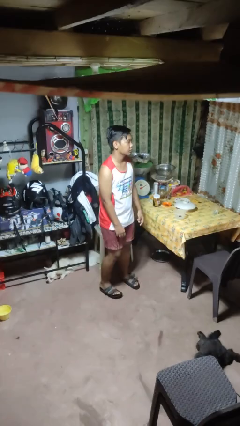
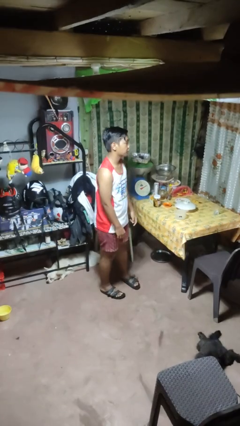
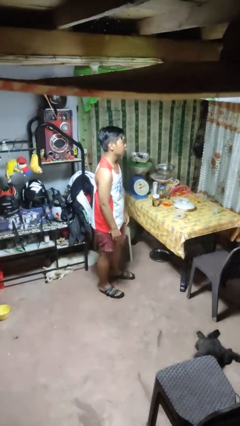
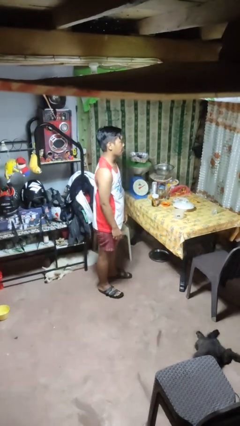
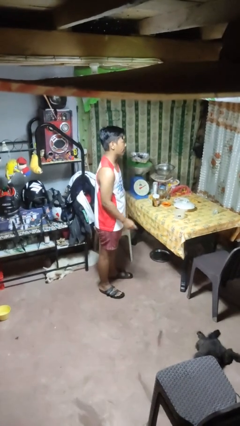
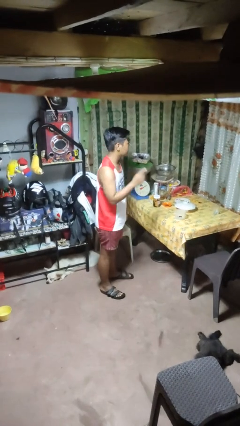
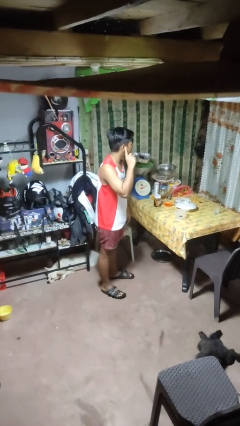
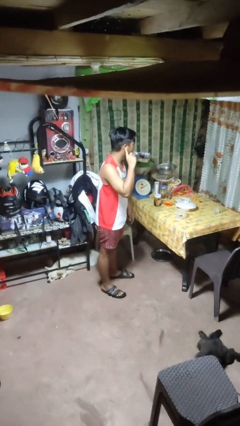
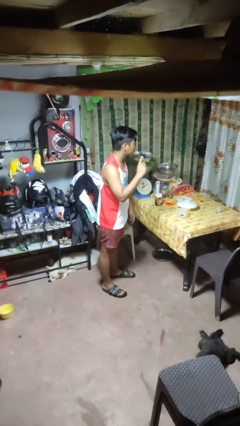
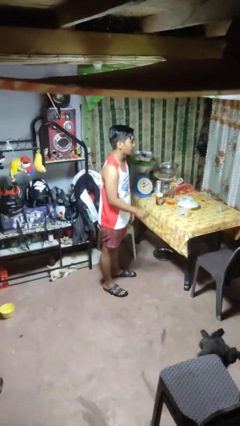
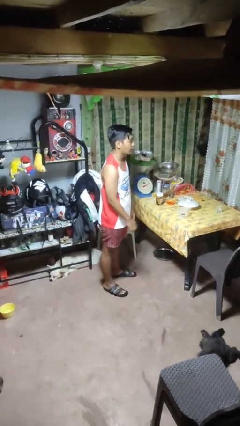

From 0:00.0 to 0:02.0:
person gestures listen closely

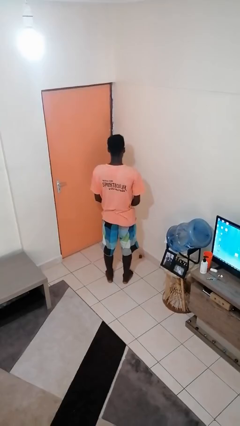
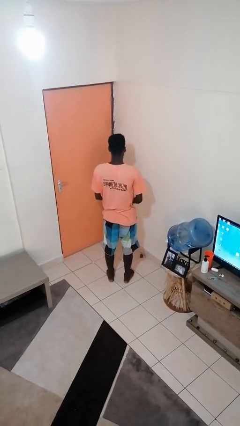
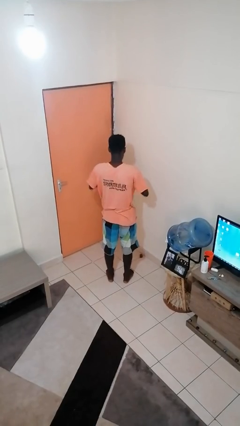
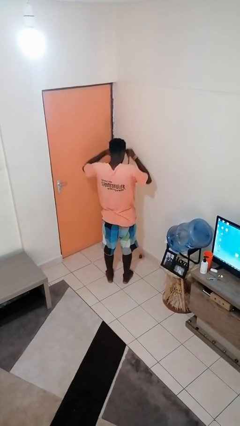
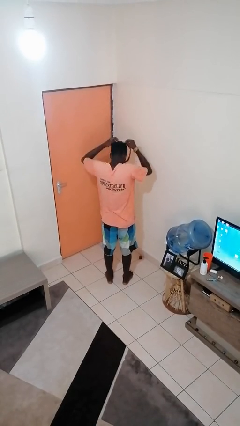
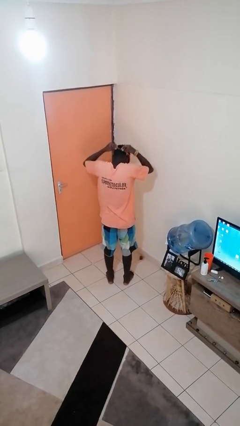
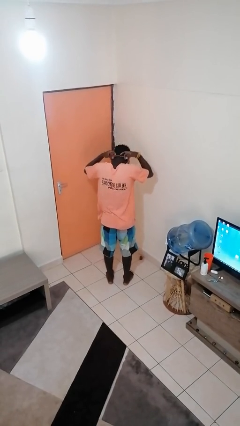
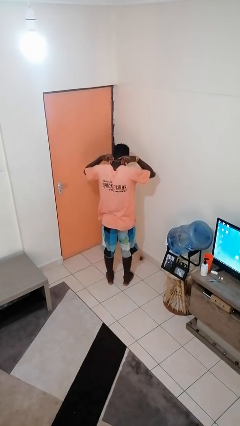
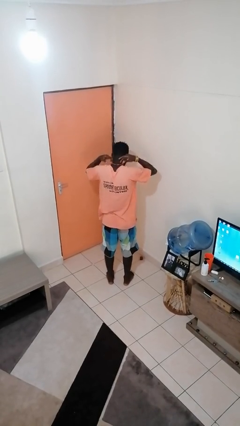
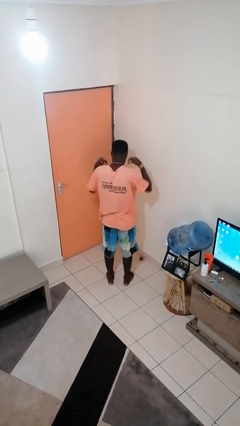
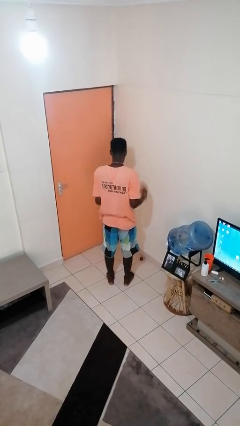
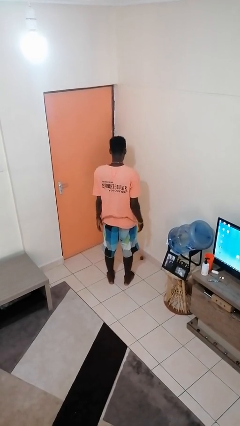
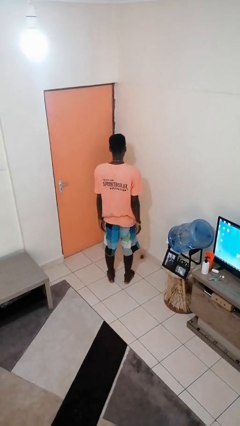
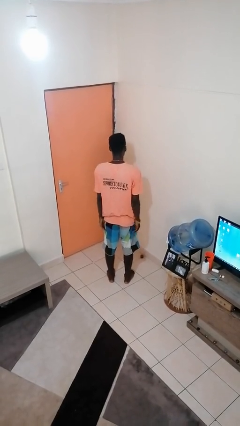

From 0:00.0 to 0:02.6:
person puts on necklace

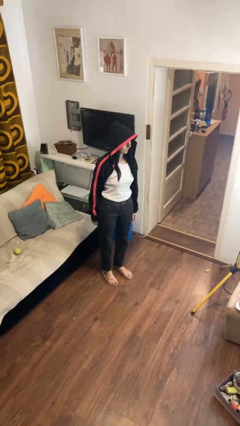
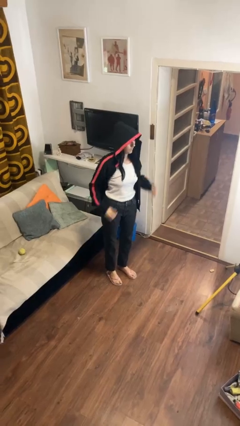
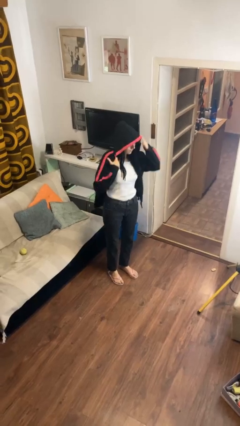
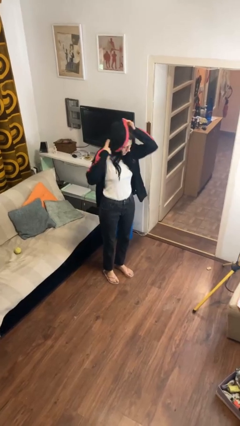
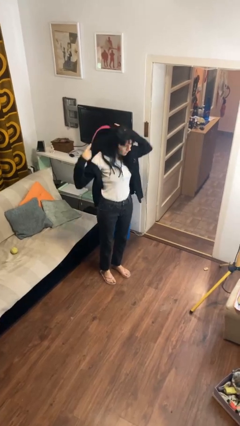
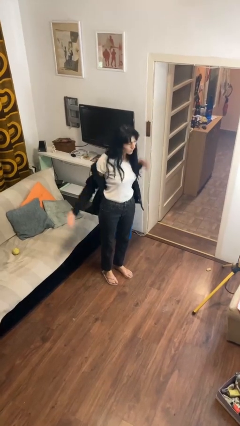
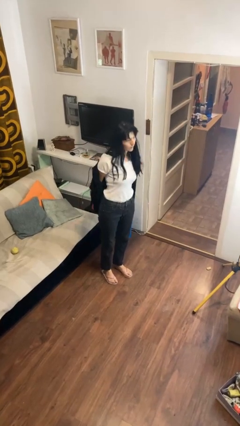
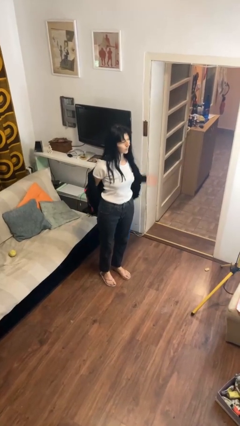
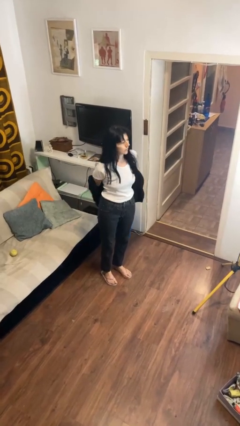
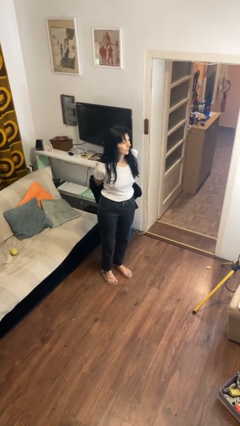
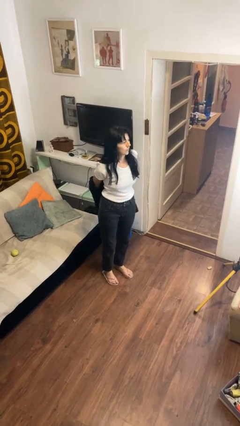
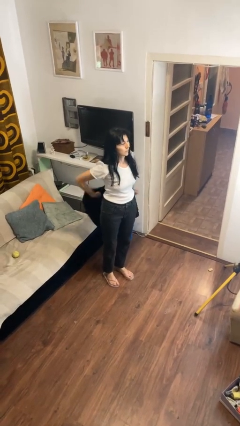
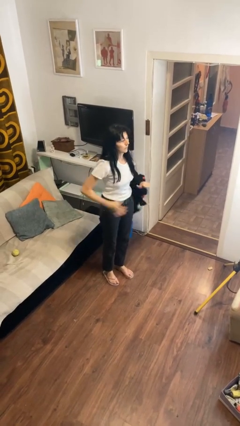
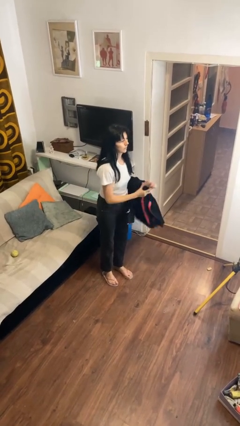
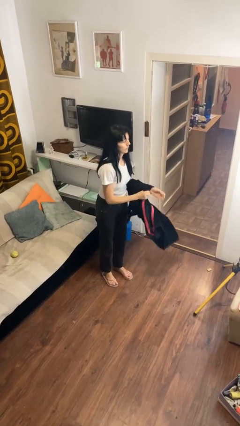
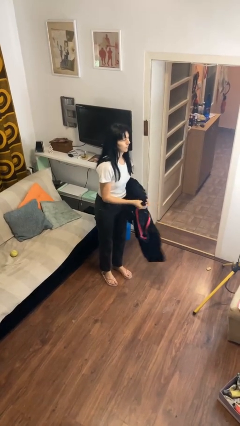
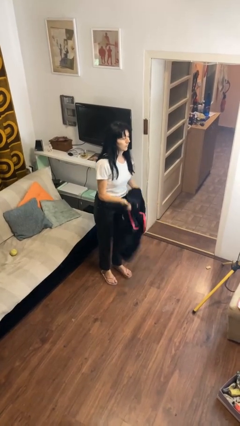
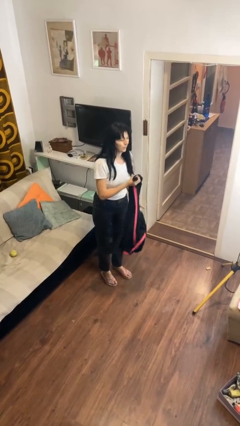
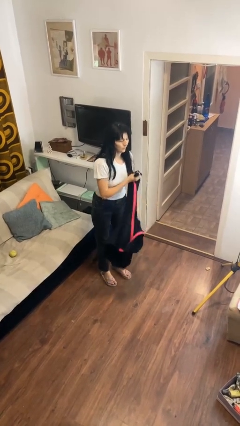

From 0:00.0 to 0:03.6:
person takes off hoodie

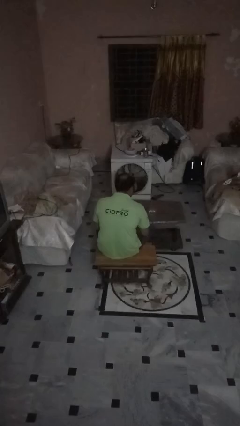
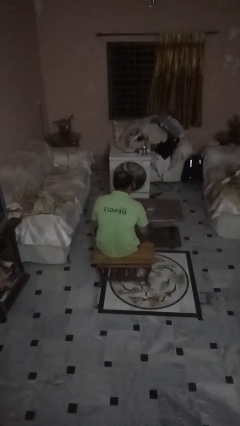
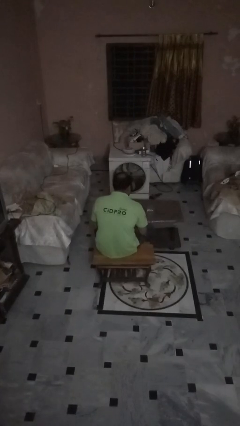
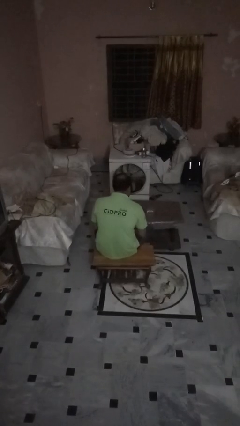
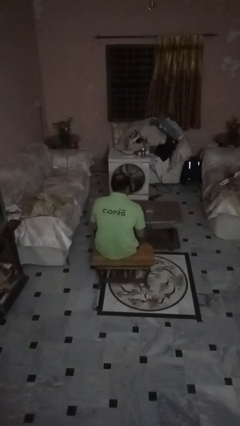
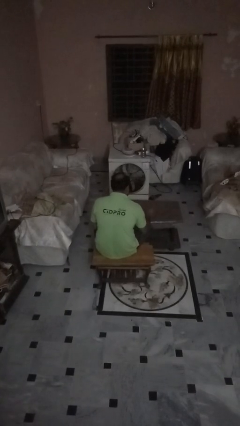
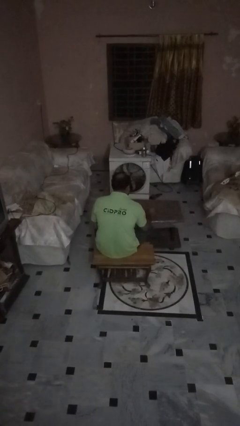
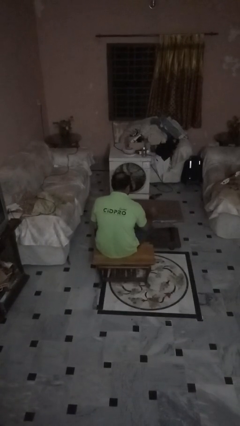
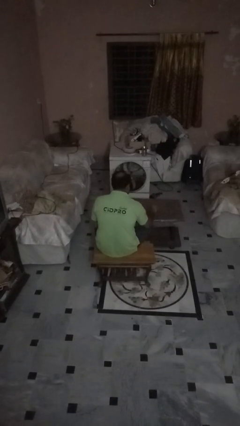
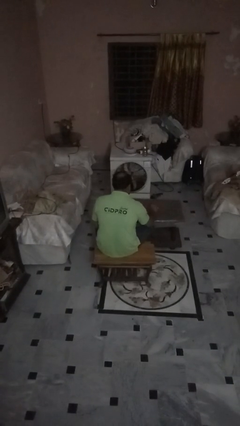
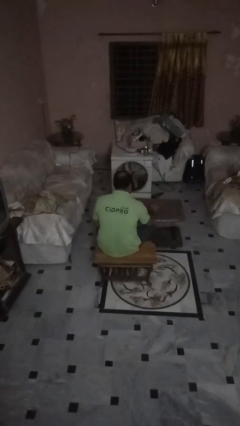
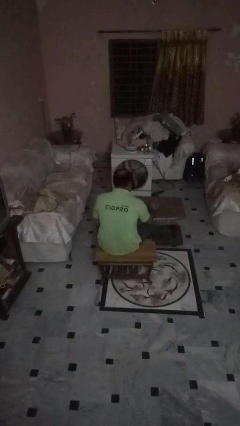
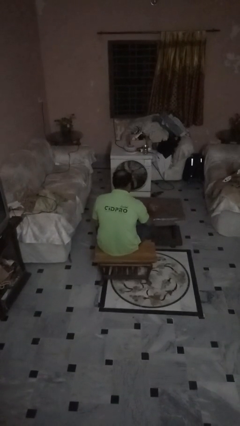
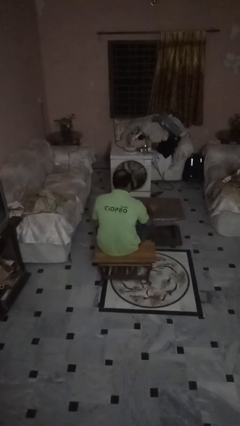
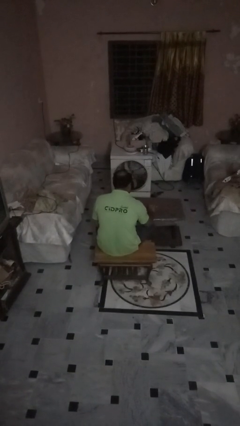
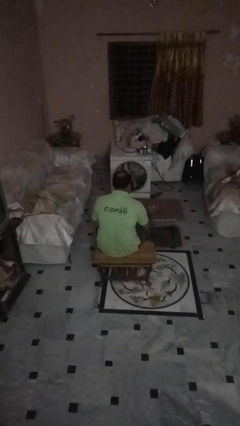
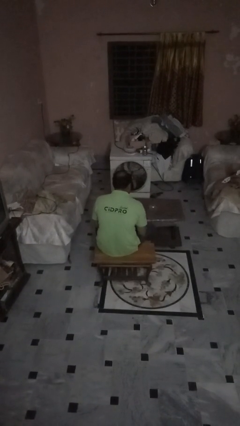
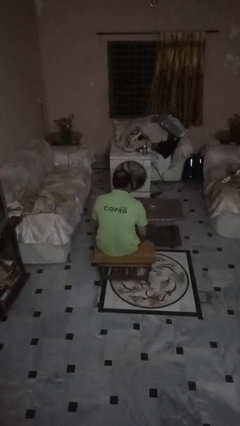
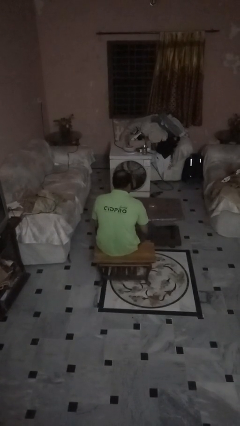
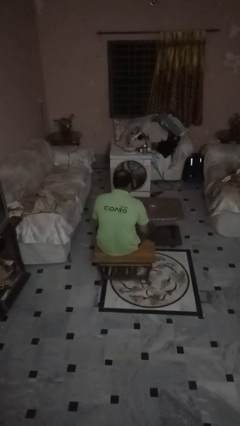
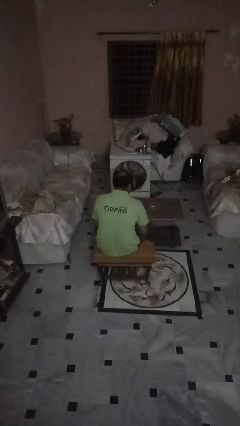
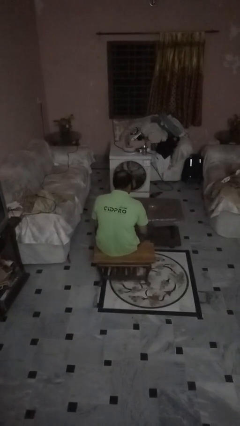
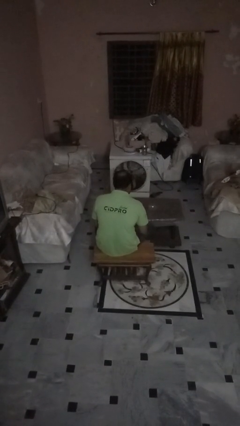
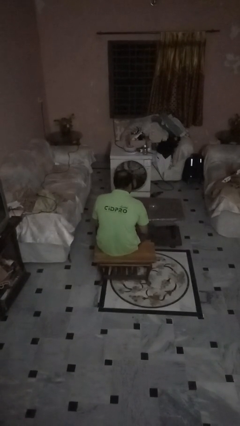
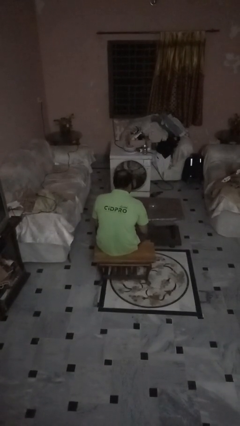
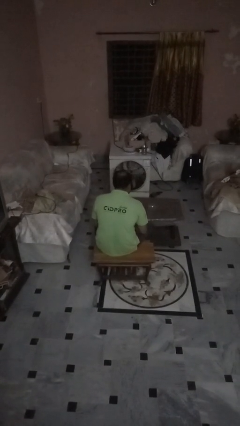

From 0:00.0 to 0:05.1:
person spills on table

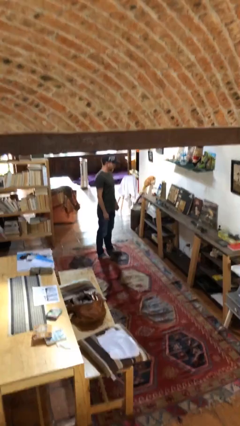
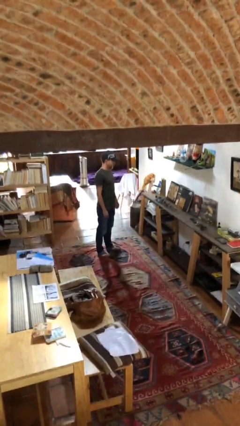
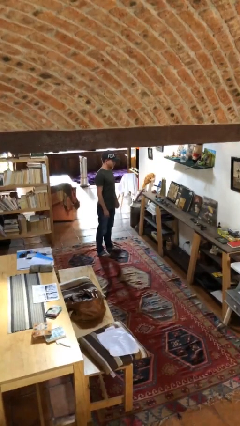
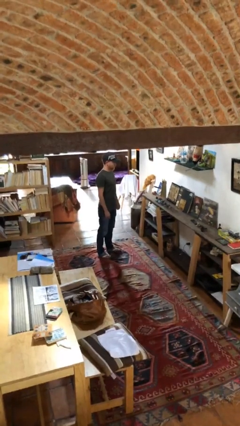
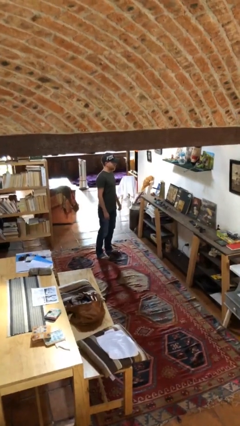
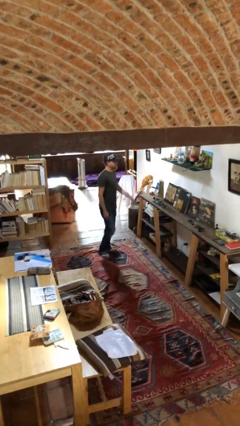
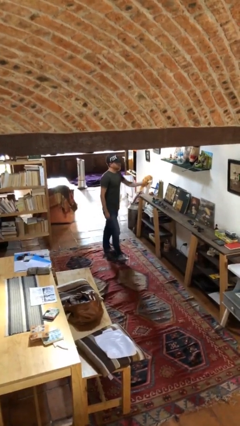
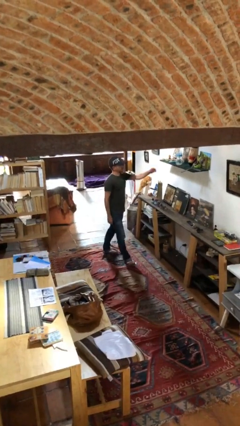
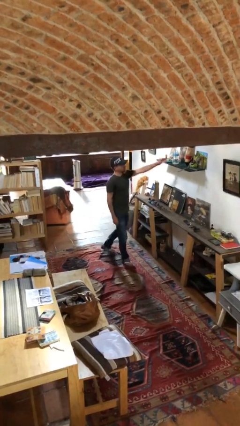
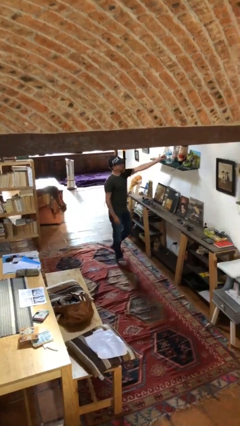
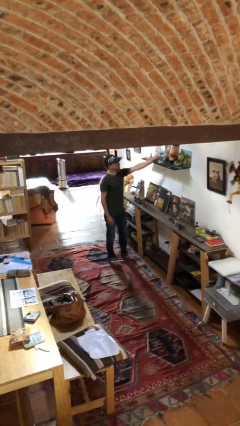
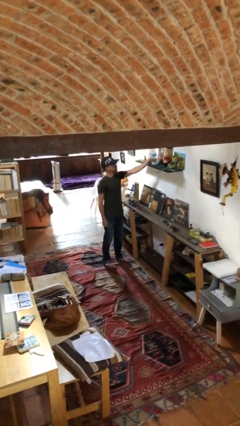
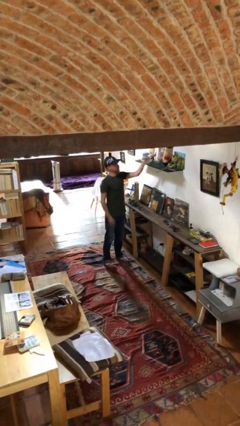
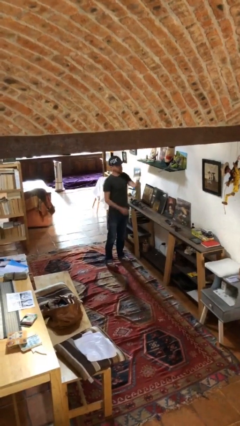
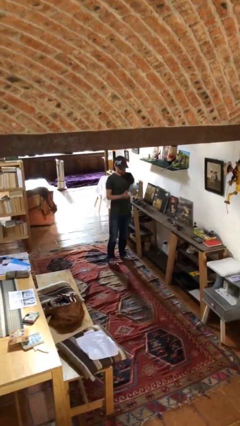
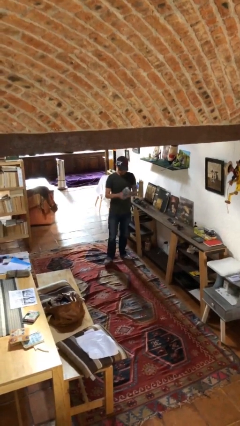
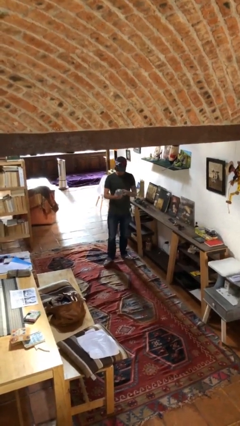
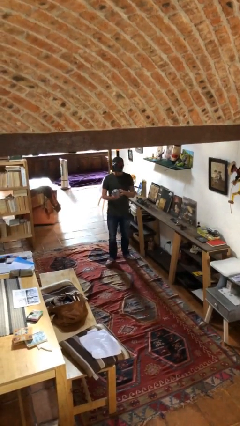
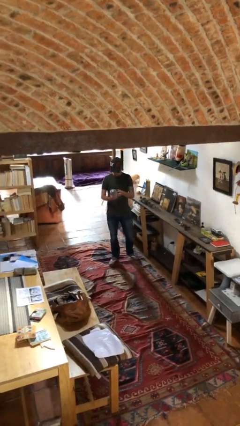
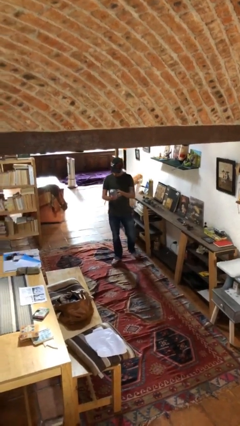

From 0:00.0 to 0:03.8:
person picks up object from shelf

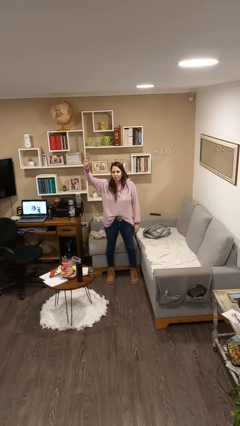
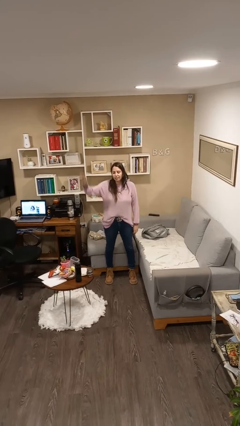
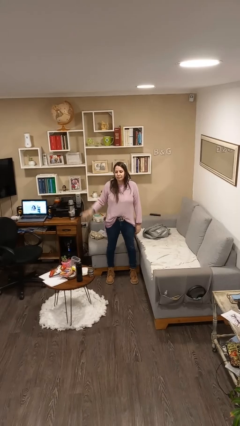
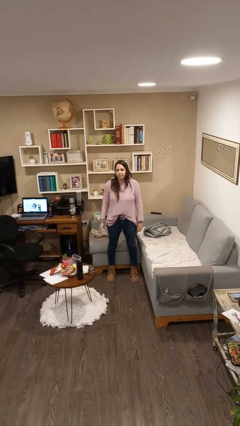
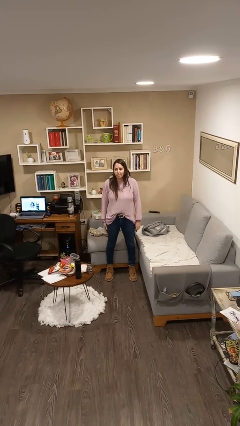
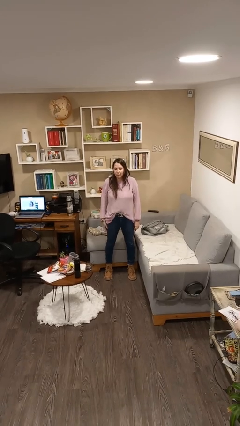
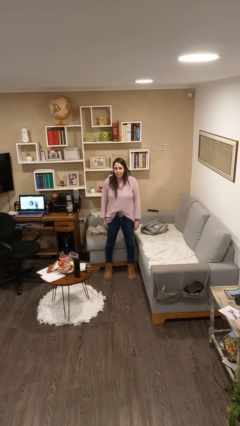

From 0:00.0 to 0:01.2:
person gestures lower hand
